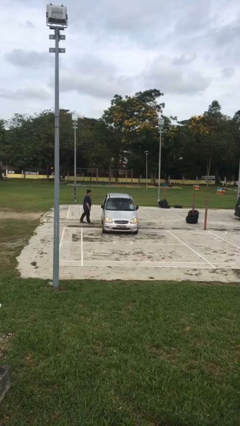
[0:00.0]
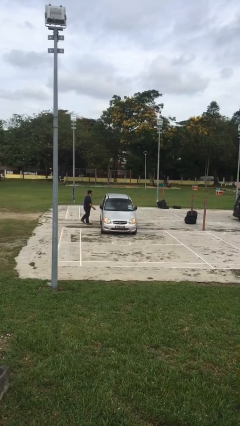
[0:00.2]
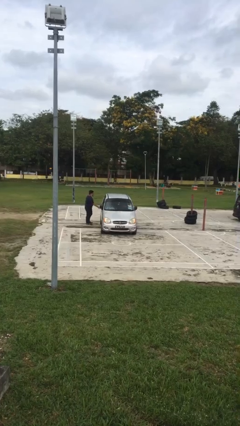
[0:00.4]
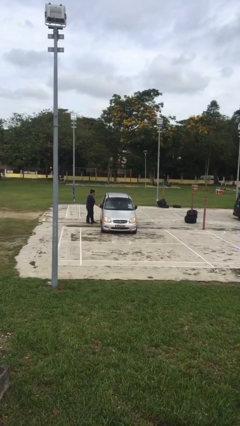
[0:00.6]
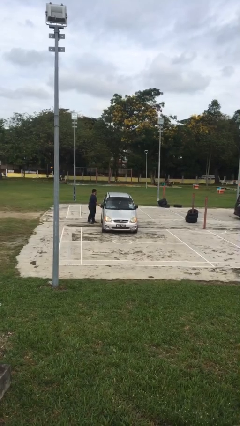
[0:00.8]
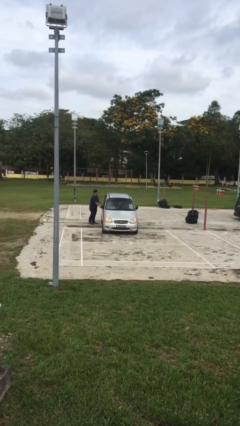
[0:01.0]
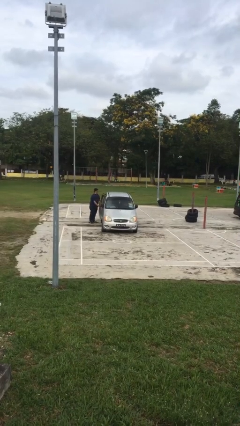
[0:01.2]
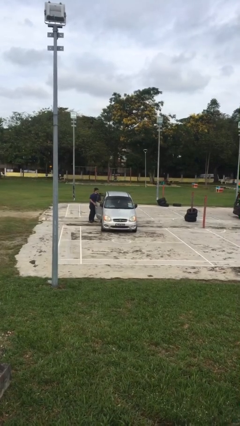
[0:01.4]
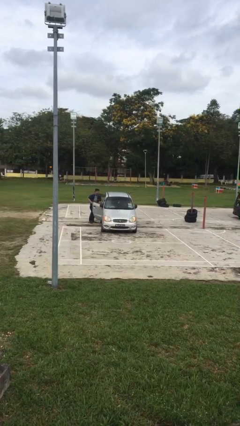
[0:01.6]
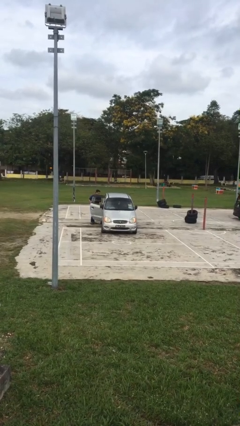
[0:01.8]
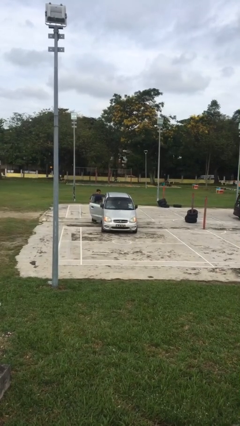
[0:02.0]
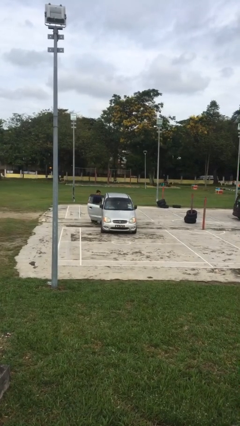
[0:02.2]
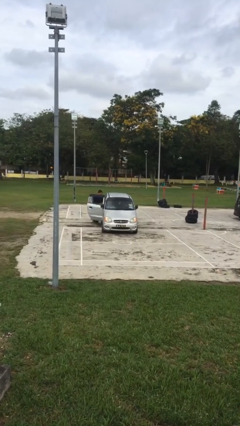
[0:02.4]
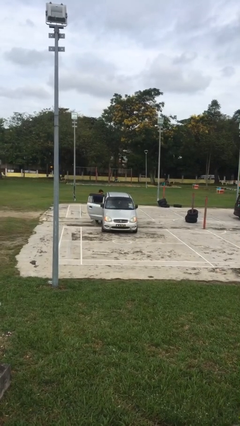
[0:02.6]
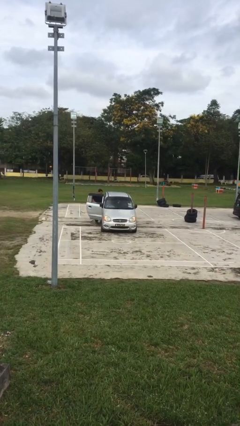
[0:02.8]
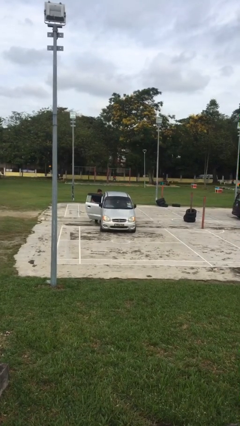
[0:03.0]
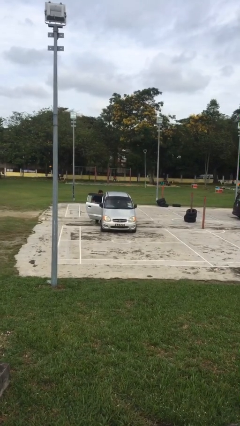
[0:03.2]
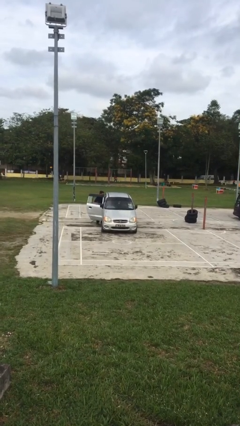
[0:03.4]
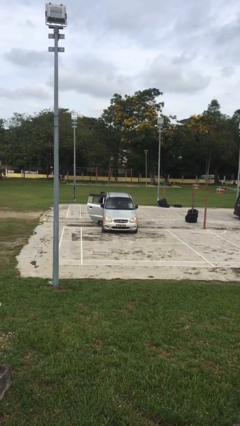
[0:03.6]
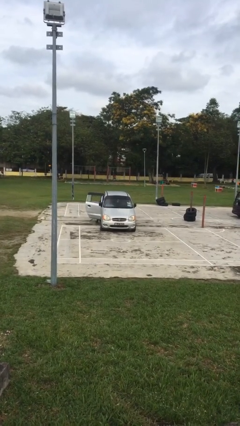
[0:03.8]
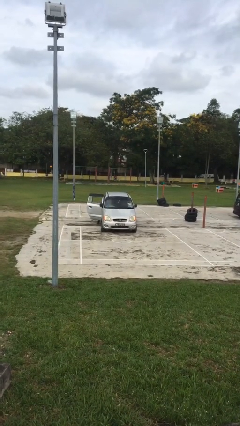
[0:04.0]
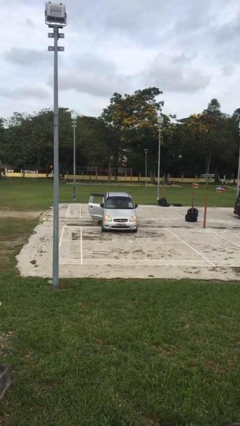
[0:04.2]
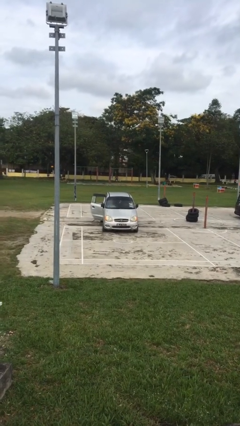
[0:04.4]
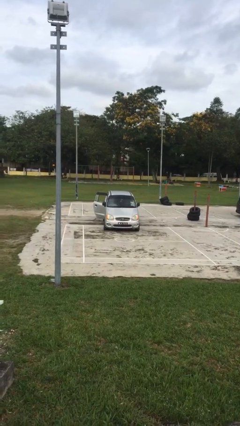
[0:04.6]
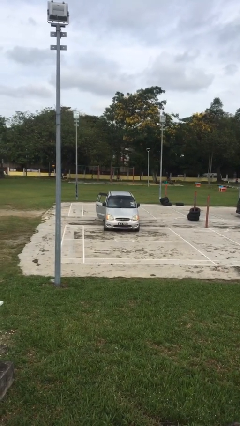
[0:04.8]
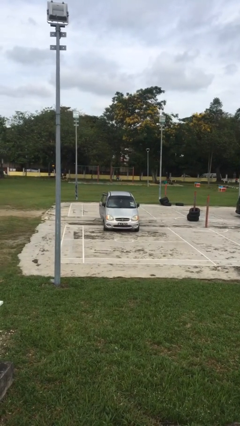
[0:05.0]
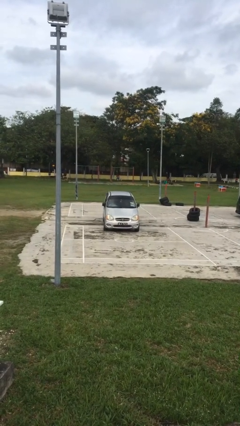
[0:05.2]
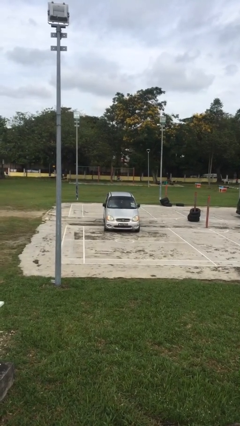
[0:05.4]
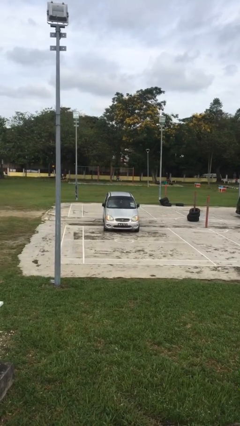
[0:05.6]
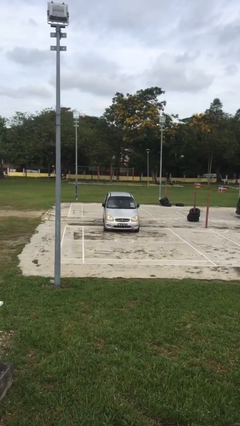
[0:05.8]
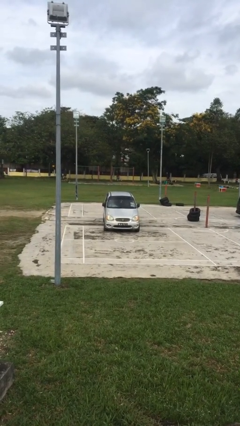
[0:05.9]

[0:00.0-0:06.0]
car picks up person

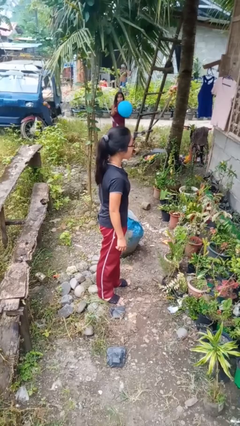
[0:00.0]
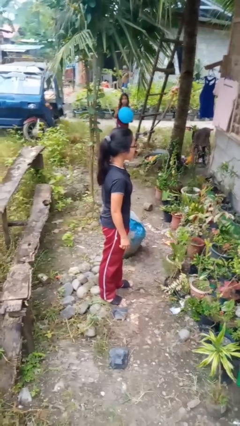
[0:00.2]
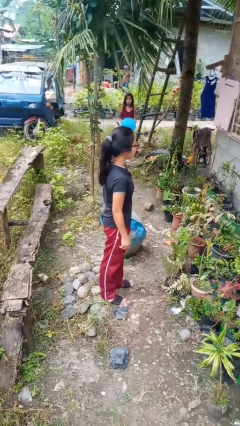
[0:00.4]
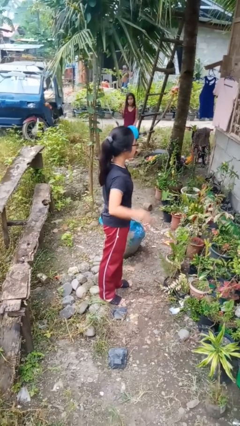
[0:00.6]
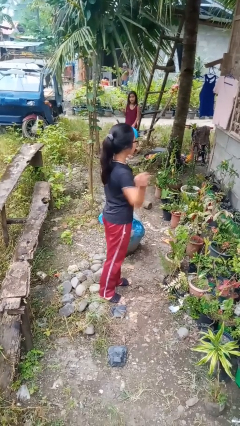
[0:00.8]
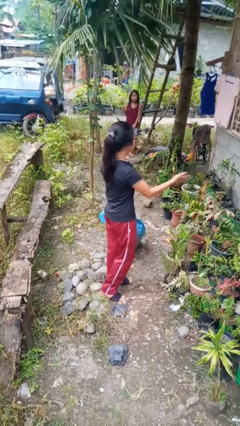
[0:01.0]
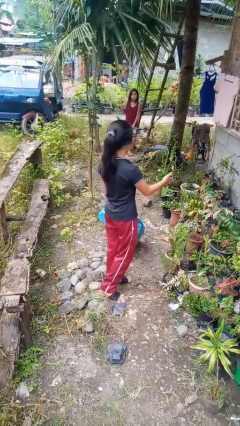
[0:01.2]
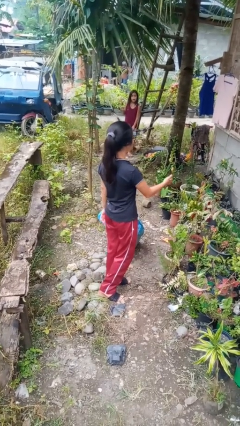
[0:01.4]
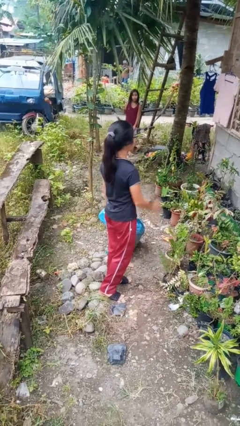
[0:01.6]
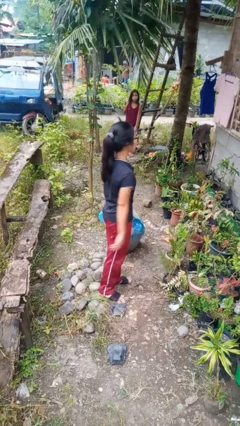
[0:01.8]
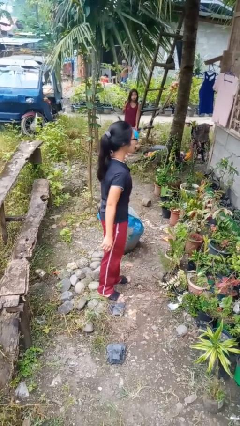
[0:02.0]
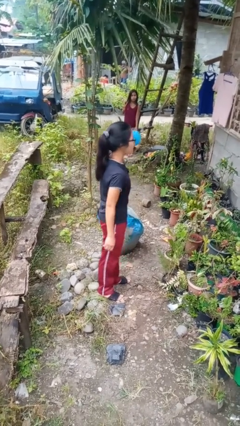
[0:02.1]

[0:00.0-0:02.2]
person karate chop

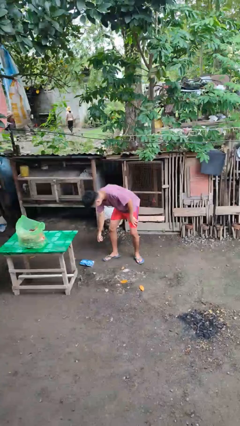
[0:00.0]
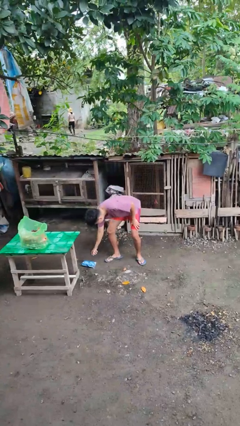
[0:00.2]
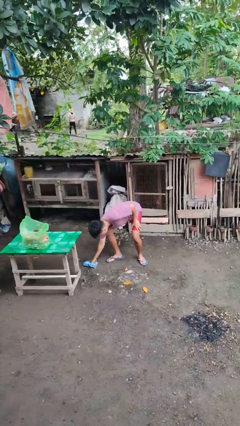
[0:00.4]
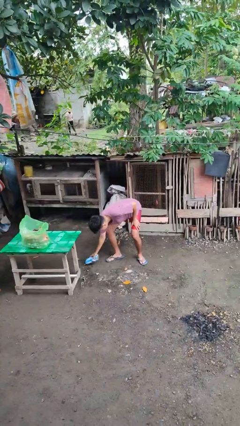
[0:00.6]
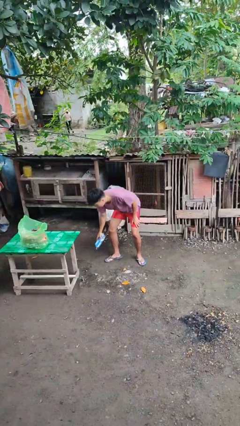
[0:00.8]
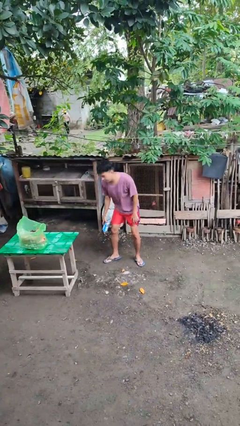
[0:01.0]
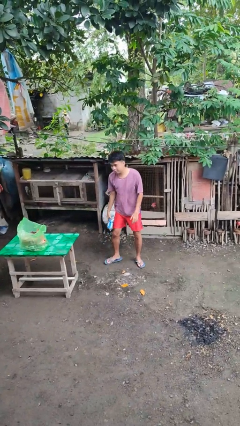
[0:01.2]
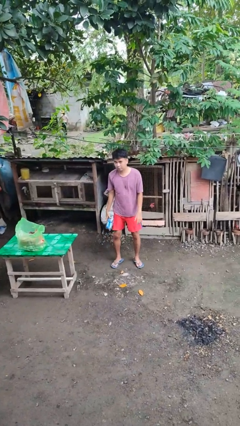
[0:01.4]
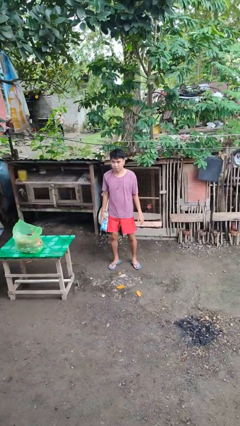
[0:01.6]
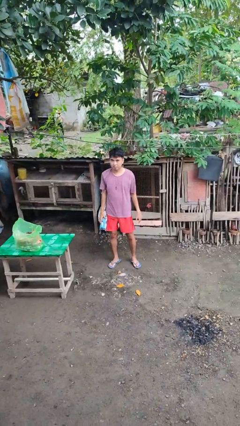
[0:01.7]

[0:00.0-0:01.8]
person picks up object from floor

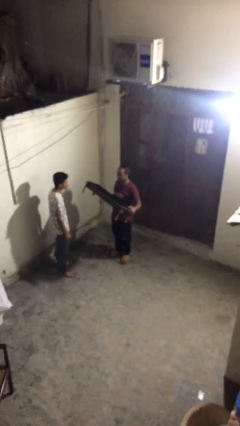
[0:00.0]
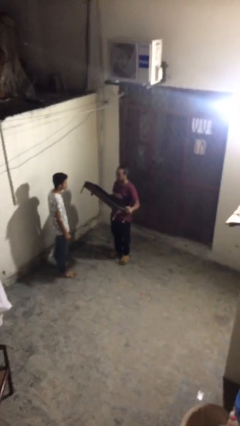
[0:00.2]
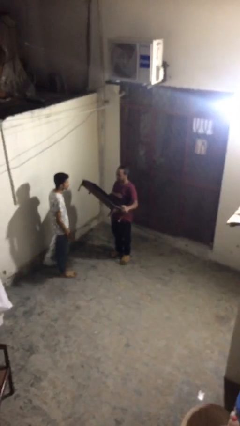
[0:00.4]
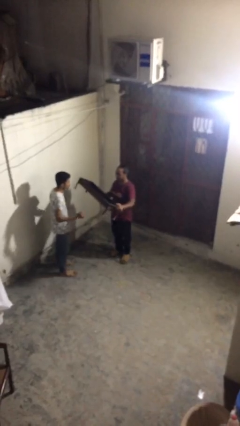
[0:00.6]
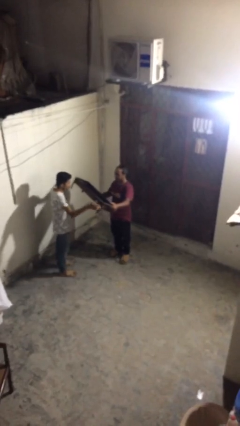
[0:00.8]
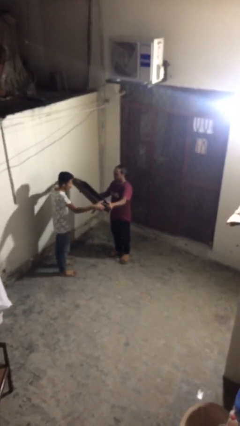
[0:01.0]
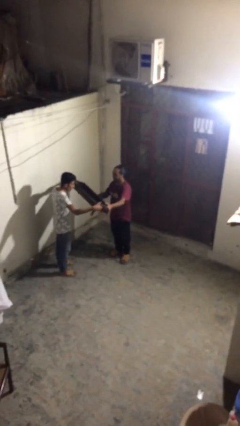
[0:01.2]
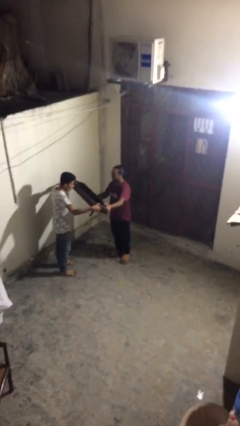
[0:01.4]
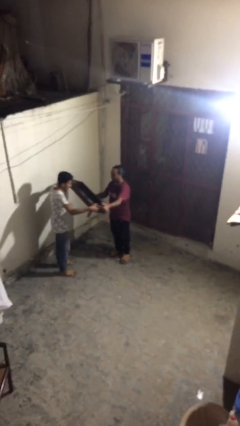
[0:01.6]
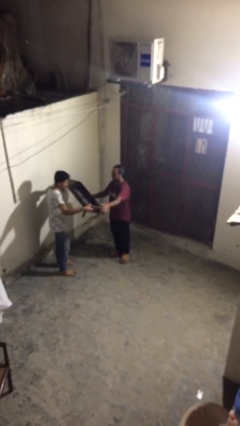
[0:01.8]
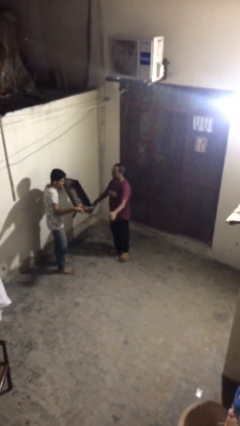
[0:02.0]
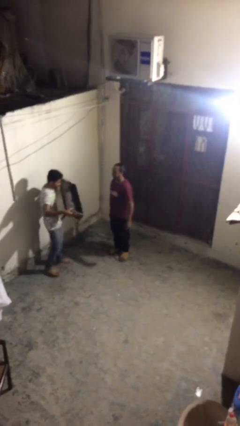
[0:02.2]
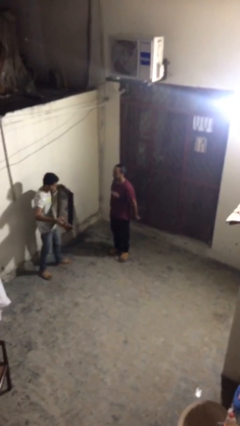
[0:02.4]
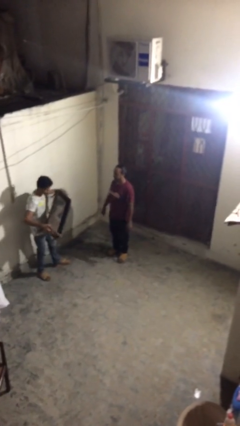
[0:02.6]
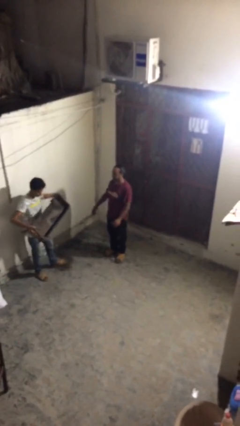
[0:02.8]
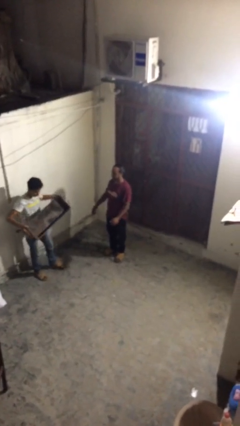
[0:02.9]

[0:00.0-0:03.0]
person transfers object to person

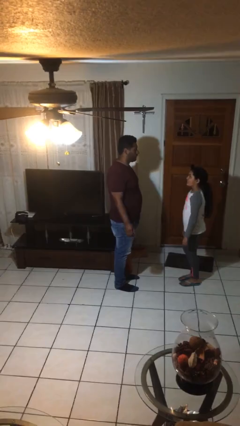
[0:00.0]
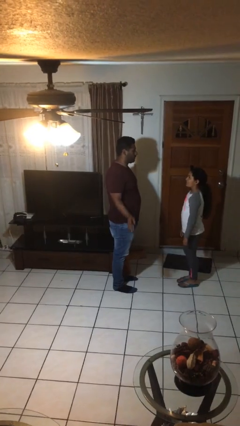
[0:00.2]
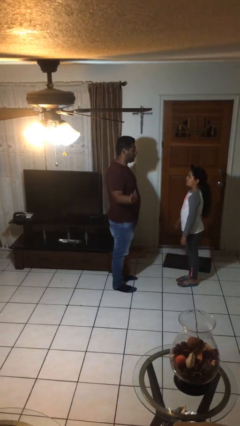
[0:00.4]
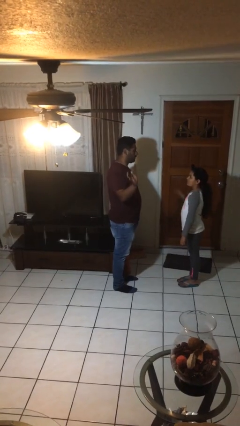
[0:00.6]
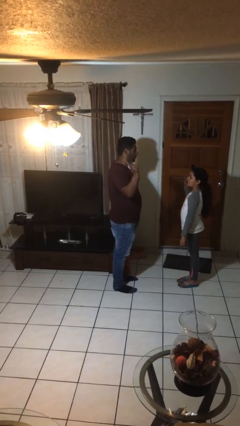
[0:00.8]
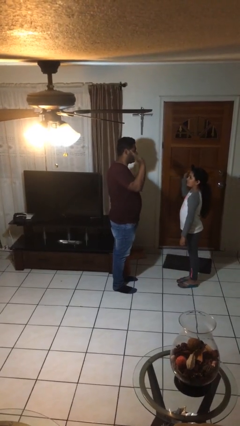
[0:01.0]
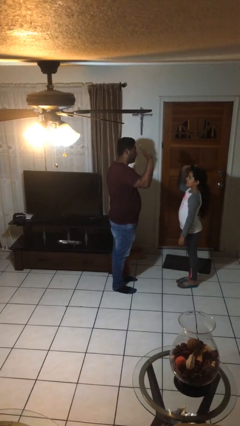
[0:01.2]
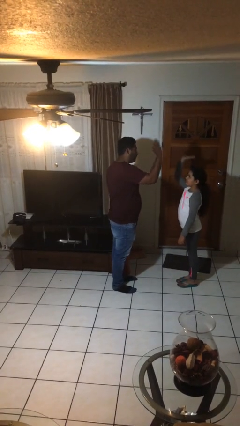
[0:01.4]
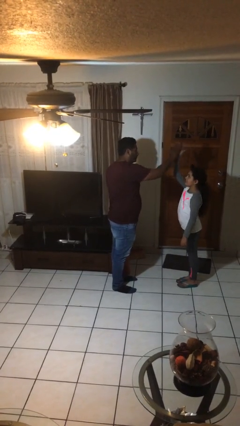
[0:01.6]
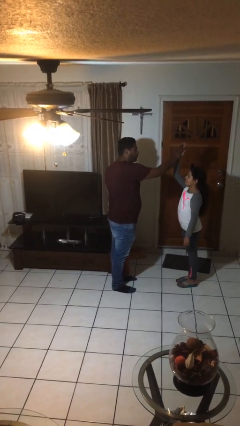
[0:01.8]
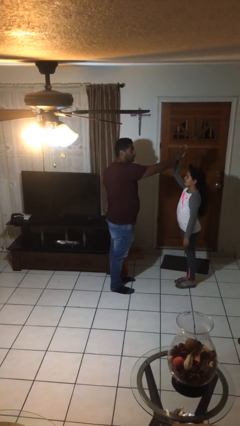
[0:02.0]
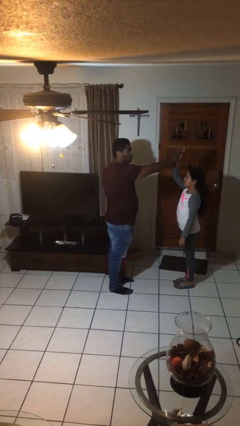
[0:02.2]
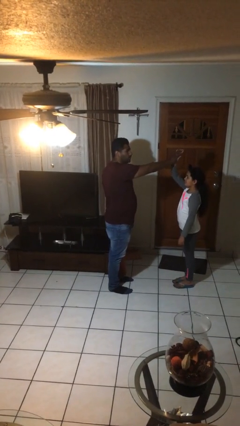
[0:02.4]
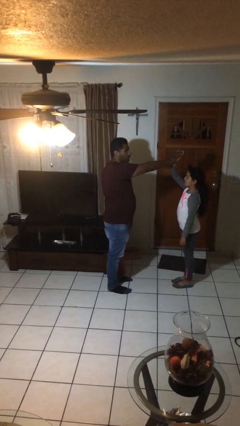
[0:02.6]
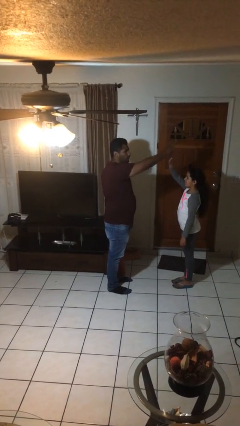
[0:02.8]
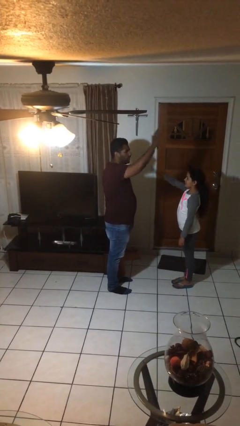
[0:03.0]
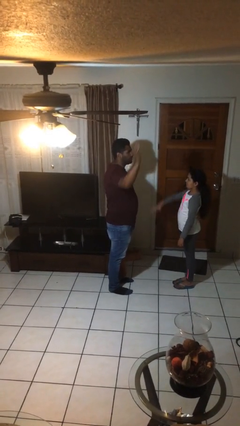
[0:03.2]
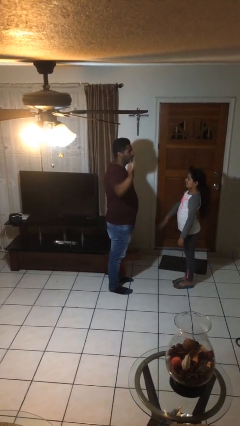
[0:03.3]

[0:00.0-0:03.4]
person highfives hand

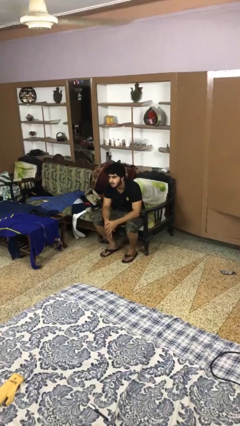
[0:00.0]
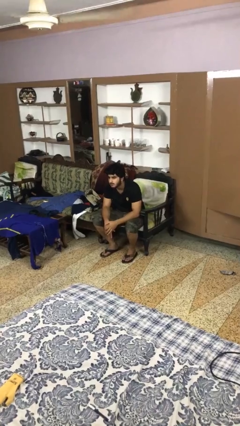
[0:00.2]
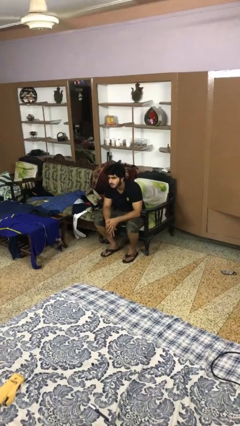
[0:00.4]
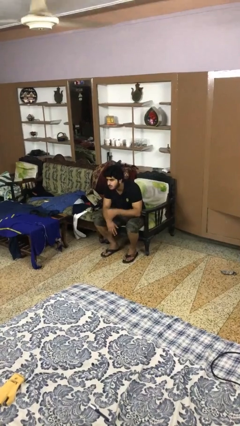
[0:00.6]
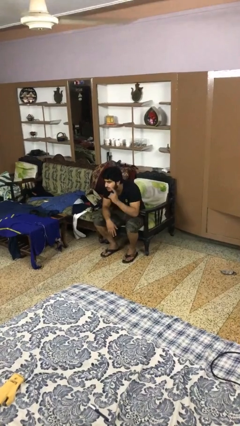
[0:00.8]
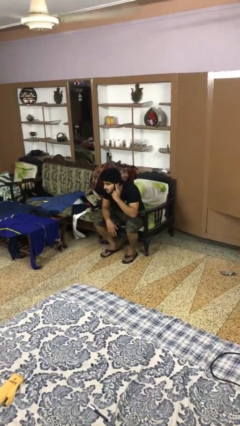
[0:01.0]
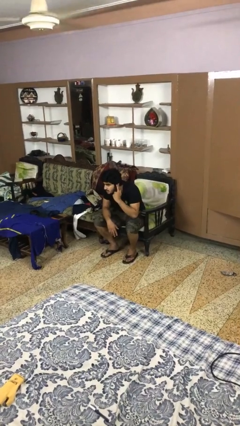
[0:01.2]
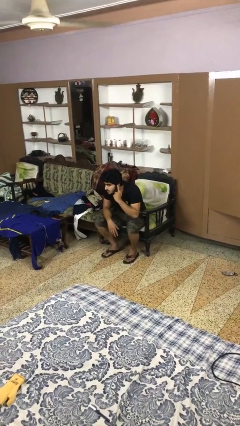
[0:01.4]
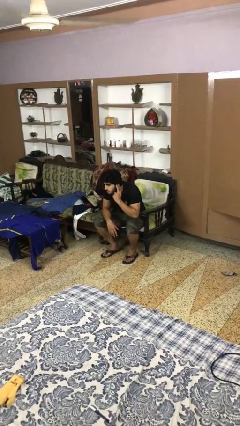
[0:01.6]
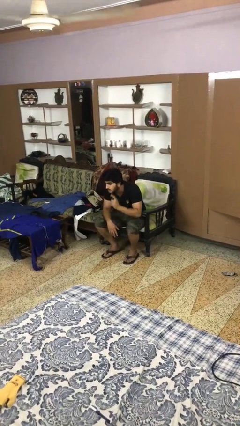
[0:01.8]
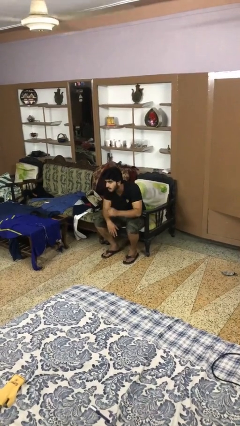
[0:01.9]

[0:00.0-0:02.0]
person gestures listen closely
